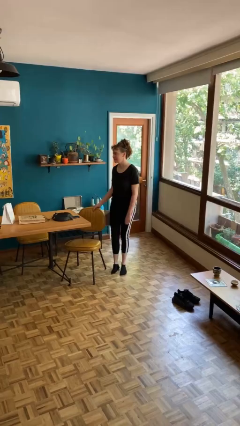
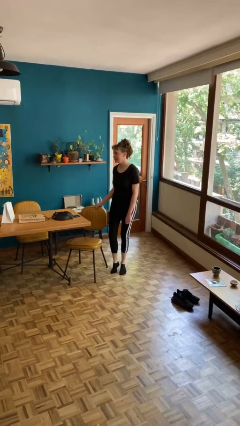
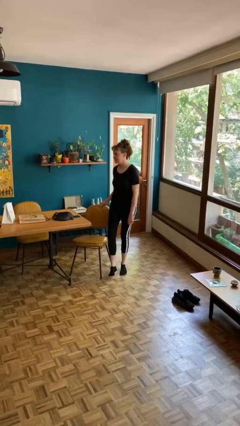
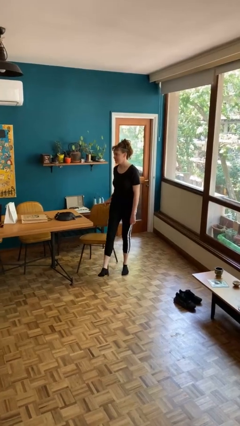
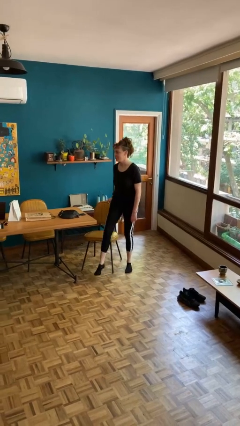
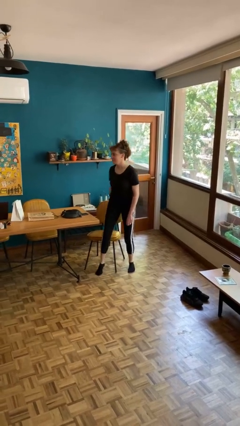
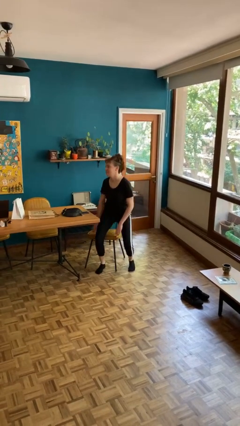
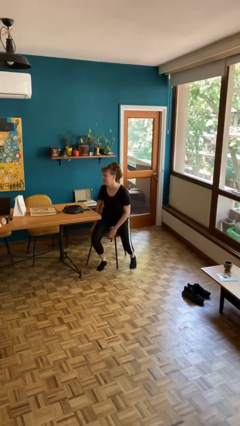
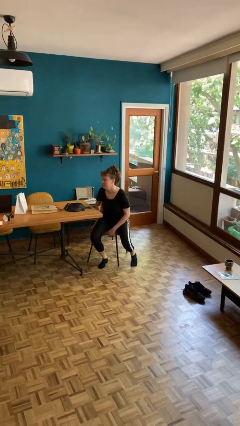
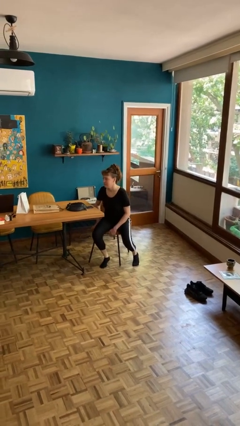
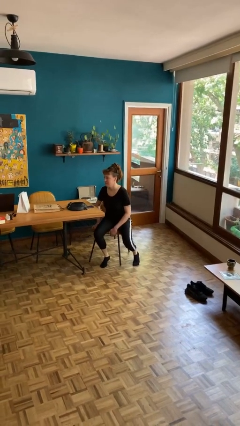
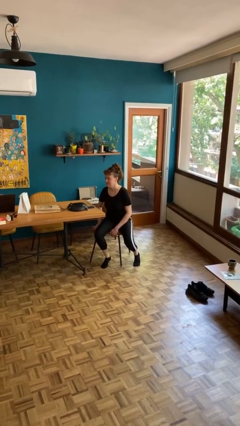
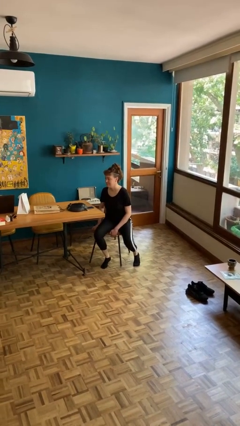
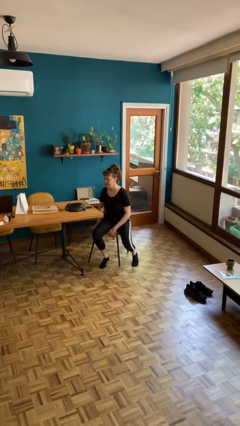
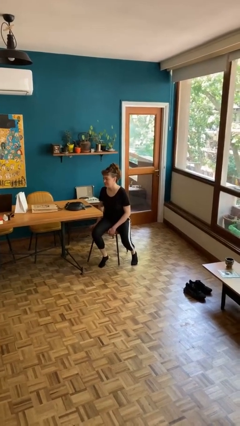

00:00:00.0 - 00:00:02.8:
person sits down

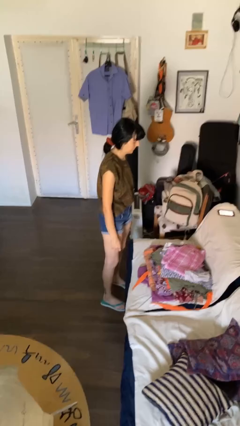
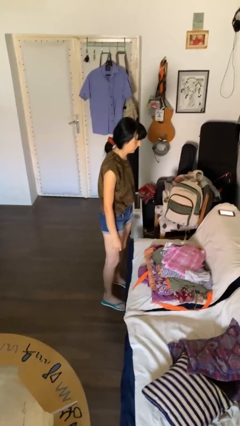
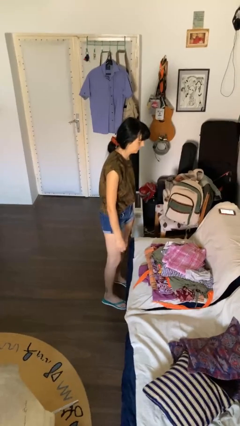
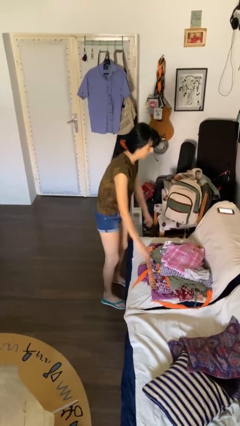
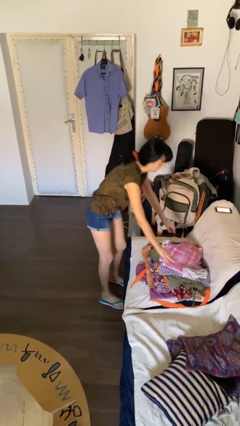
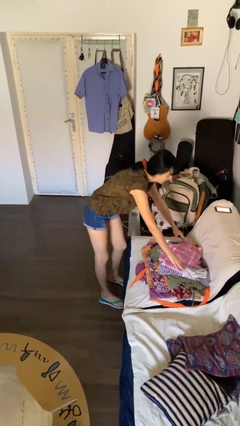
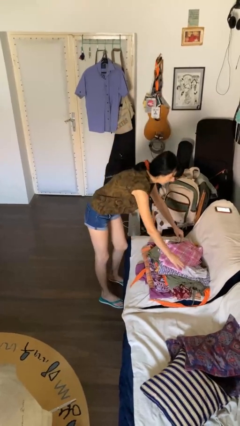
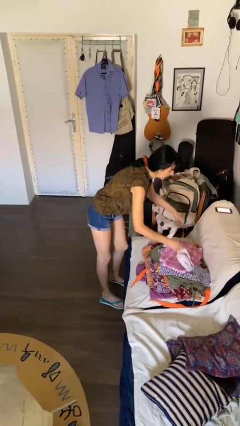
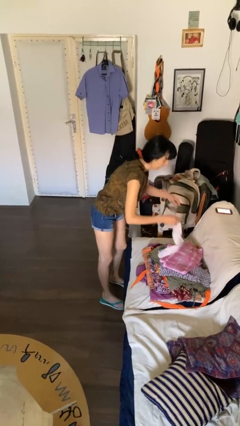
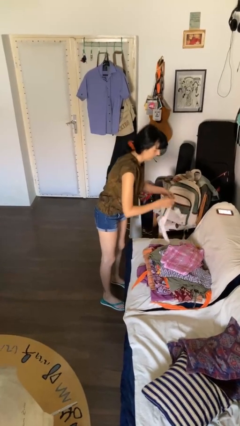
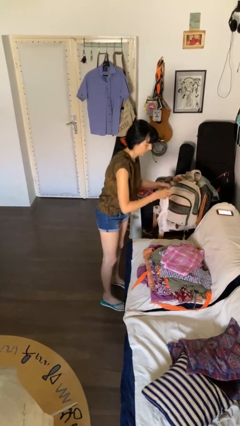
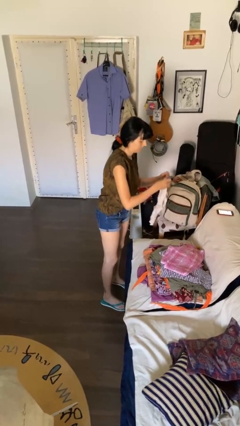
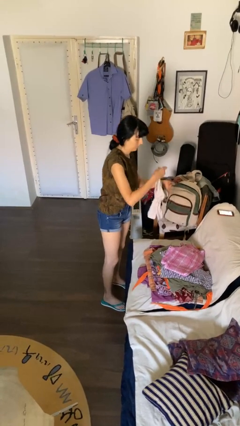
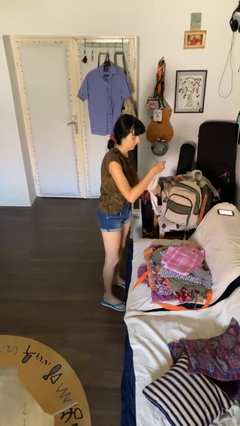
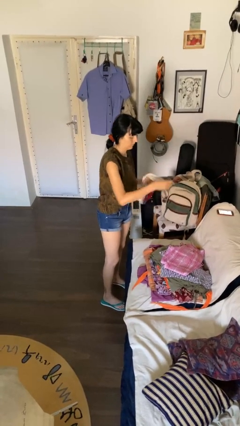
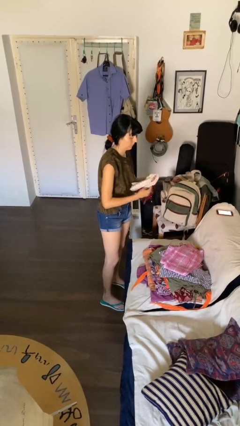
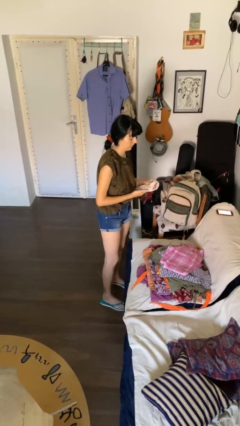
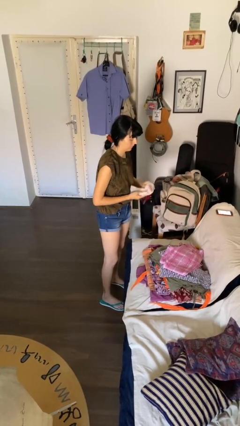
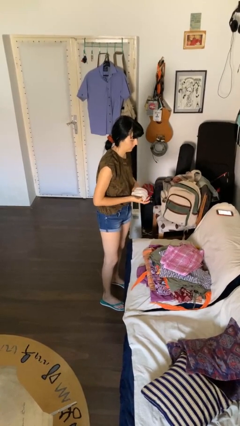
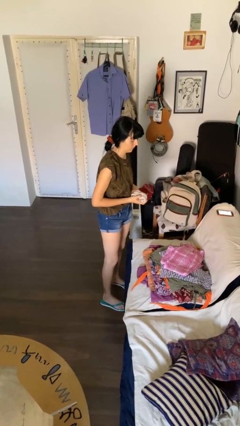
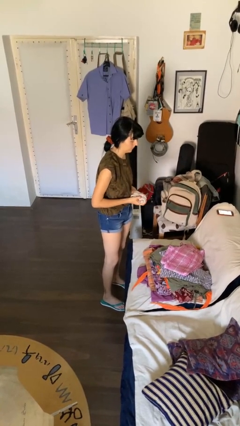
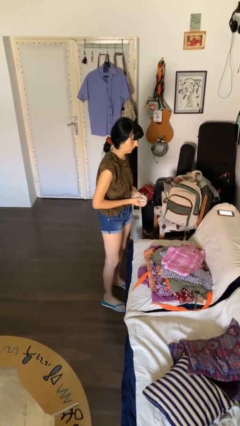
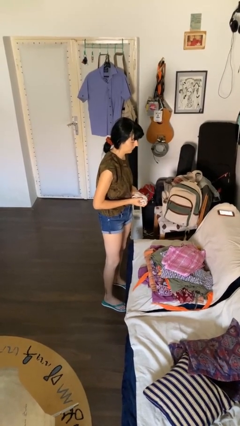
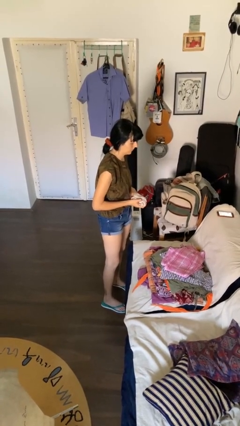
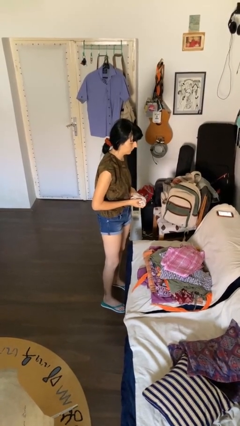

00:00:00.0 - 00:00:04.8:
person folds socks

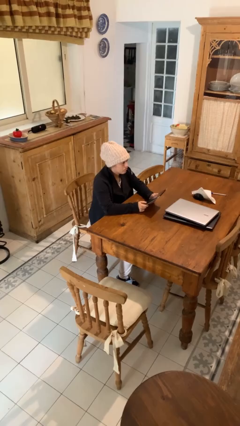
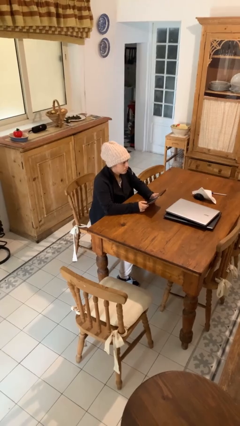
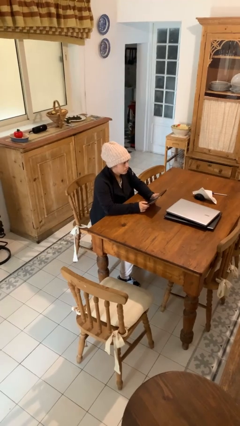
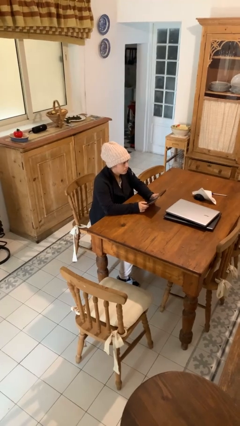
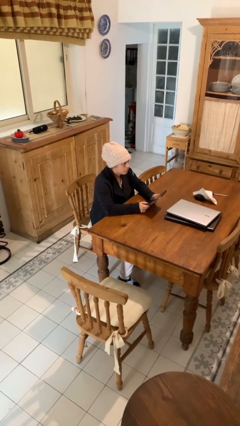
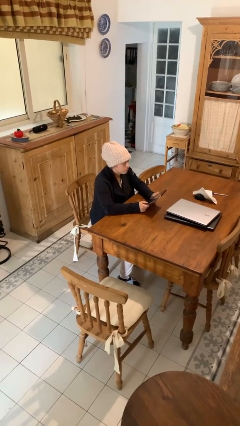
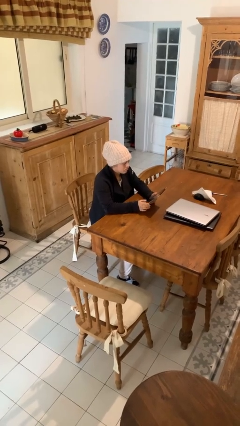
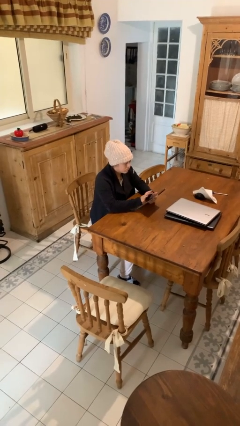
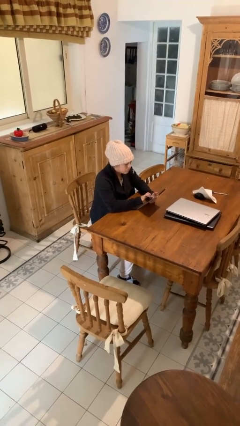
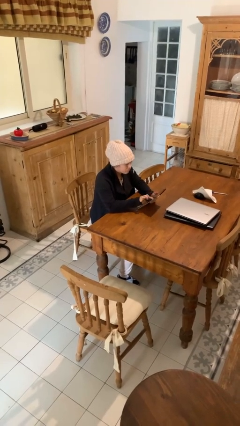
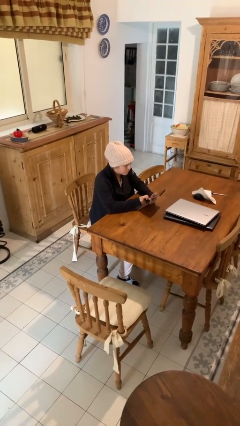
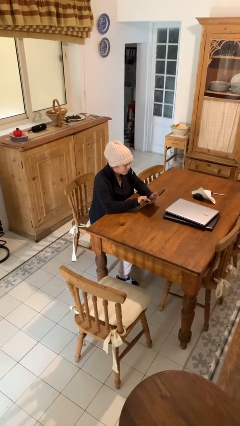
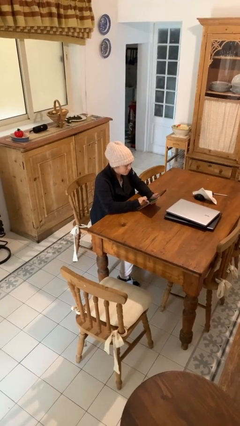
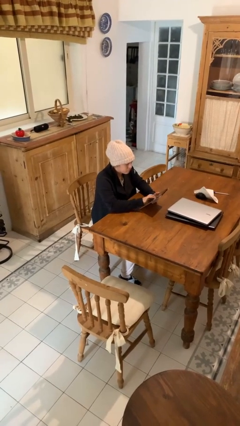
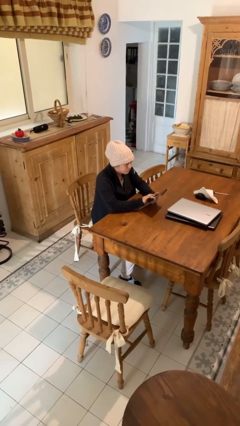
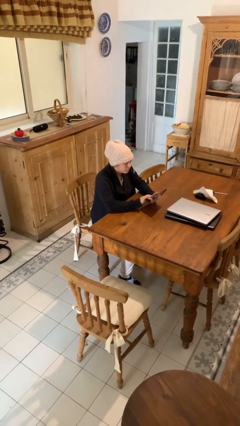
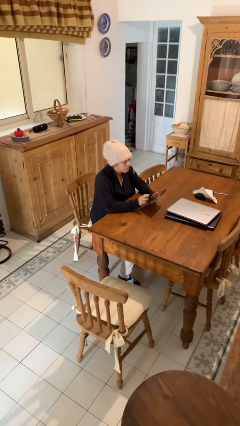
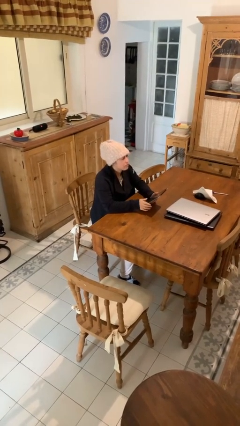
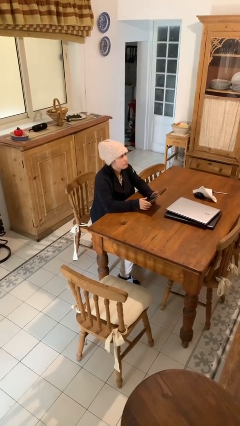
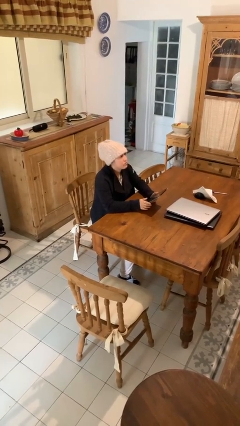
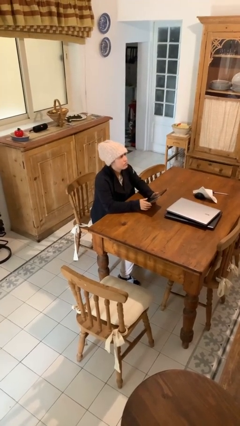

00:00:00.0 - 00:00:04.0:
person interacts with tablet

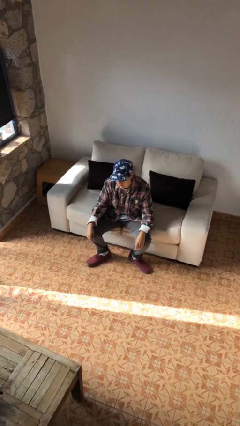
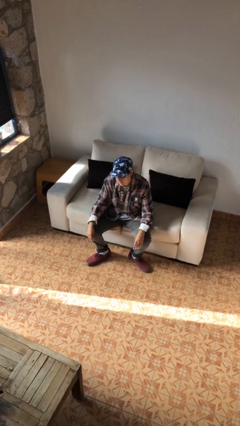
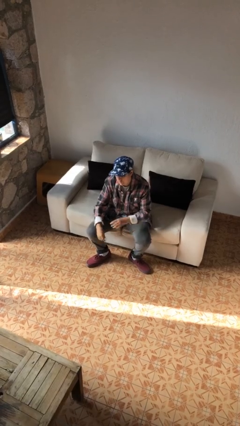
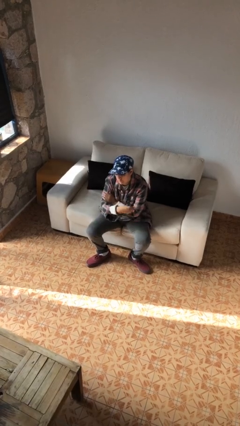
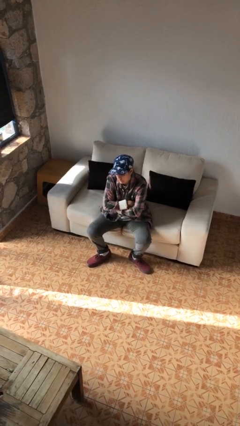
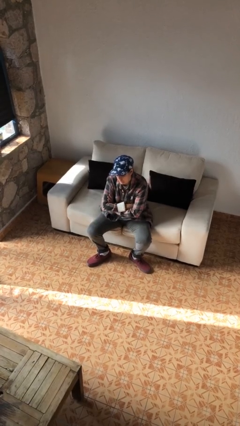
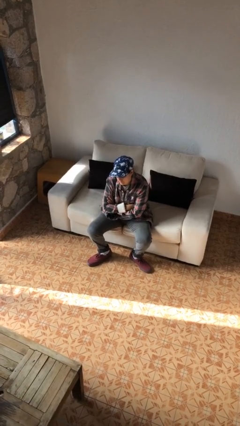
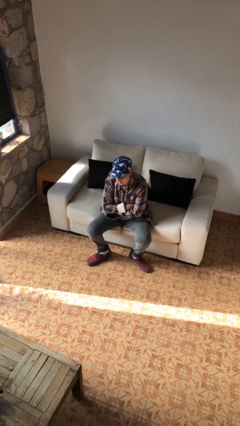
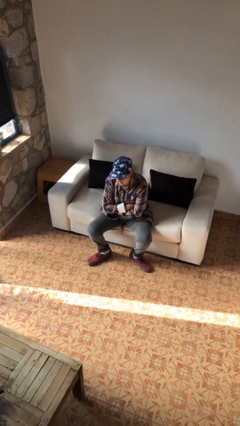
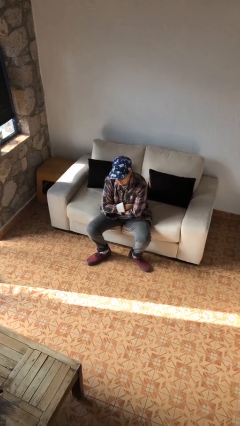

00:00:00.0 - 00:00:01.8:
person crosses arms

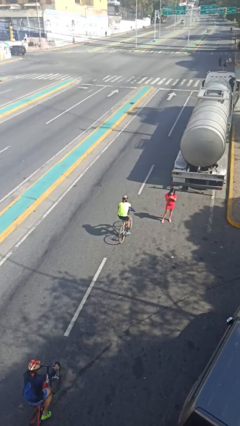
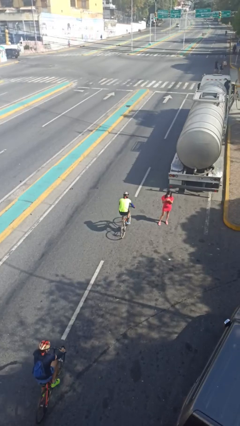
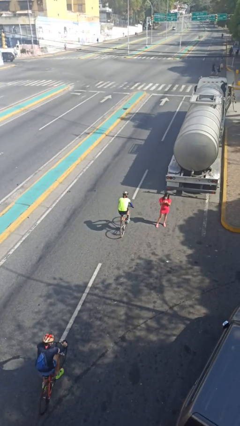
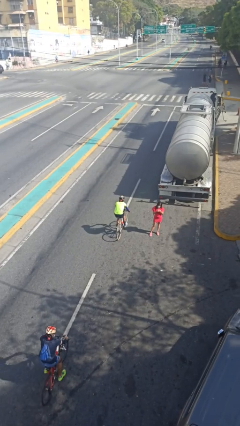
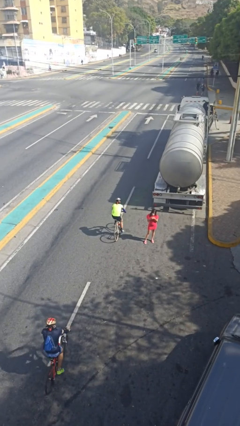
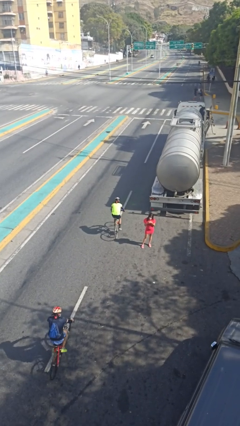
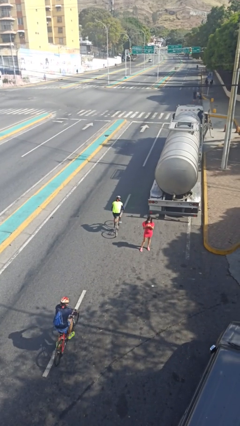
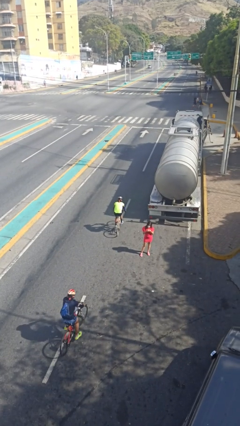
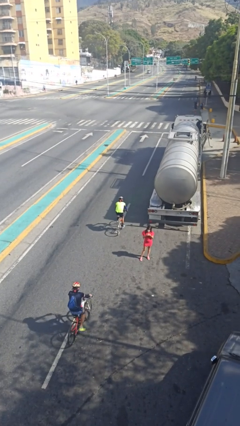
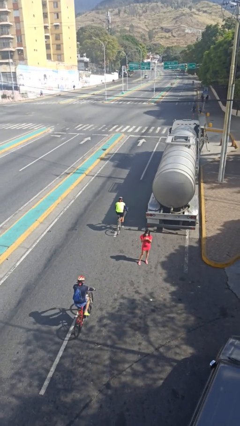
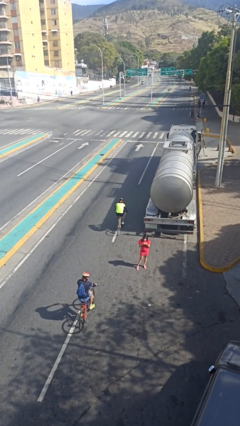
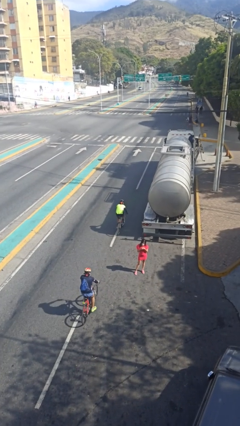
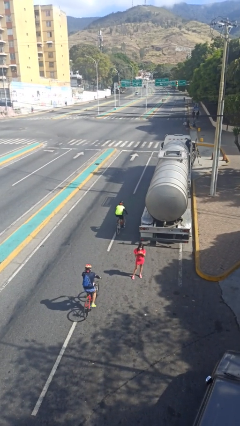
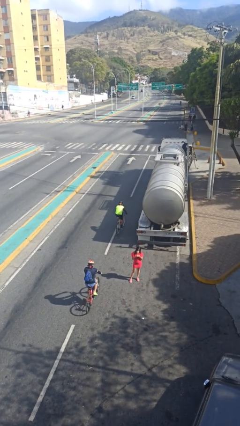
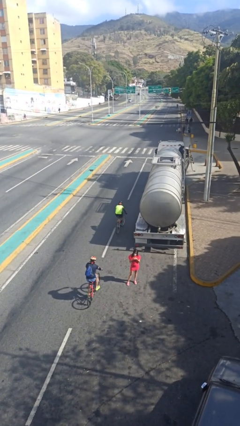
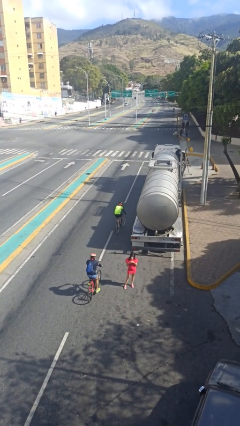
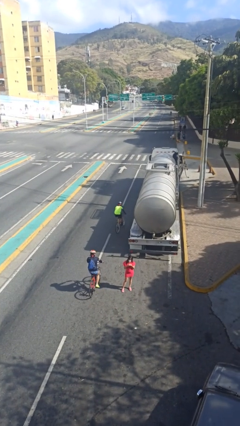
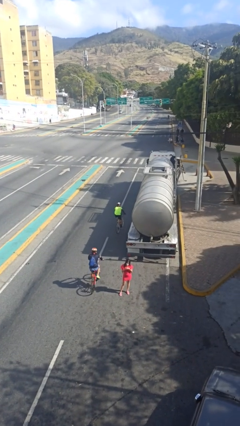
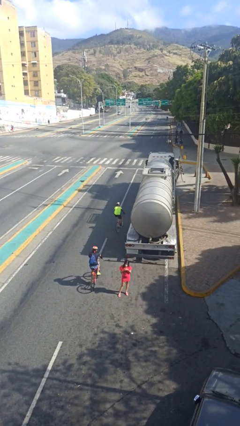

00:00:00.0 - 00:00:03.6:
person rides bicycle

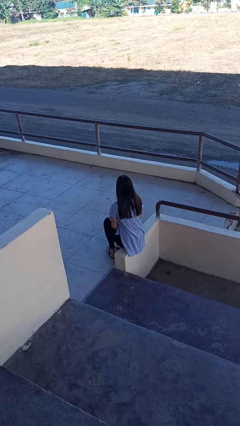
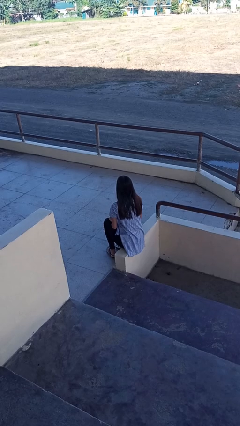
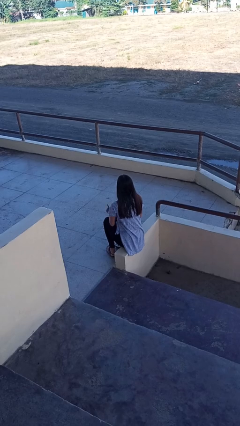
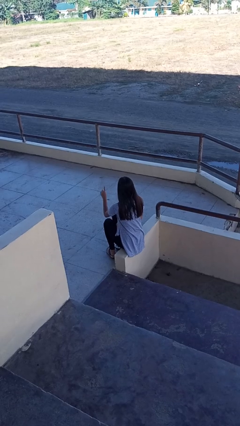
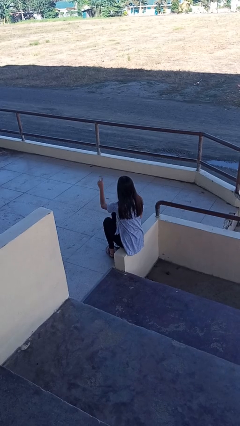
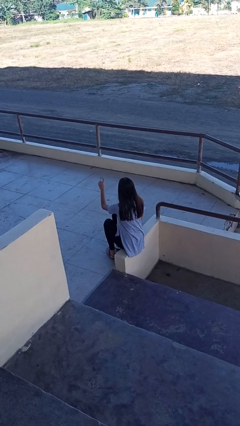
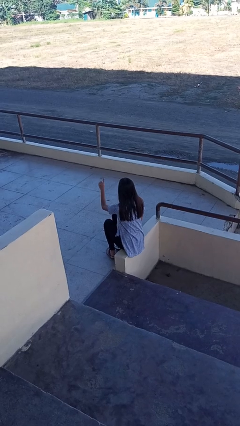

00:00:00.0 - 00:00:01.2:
person gestures number one
